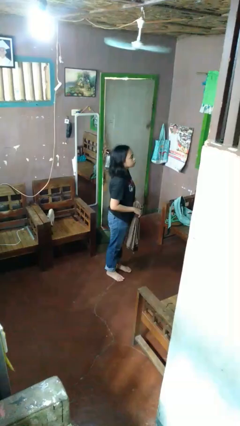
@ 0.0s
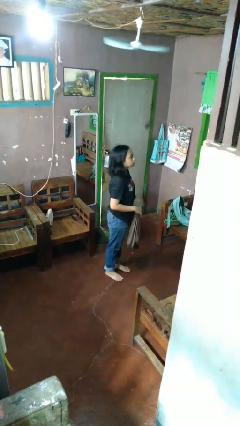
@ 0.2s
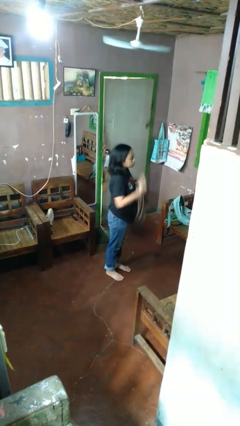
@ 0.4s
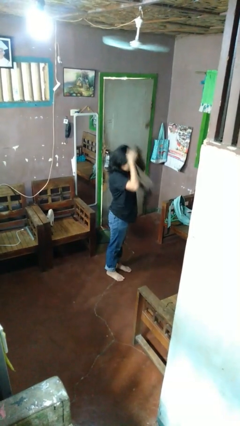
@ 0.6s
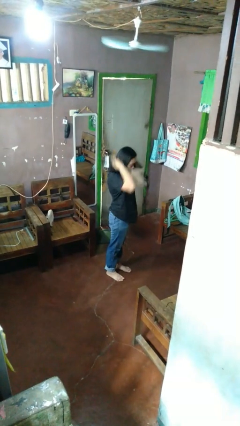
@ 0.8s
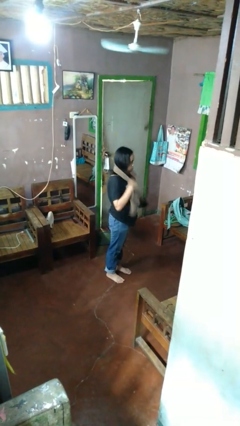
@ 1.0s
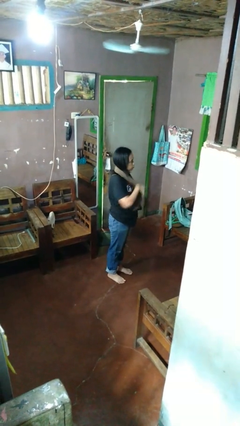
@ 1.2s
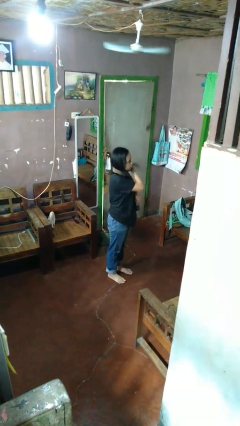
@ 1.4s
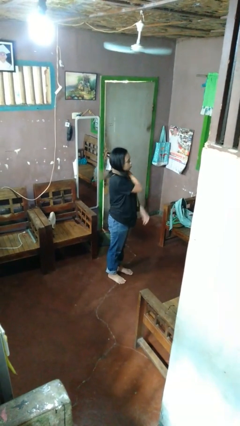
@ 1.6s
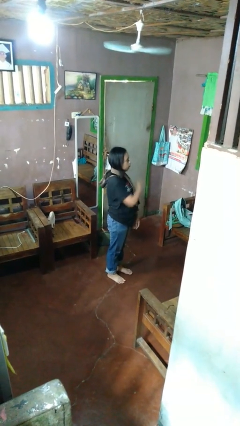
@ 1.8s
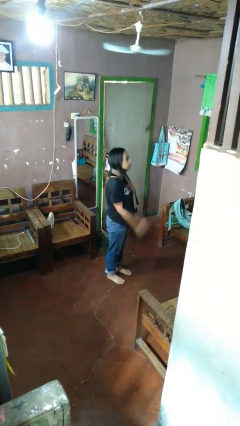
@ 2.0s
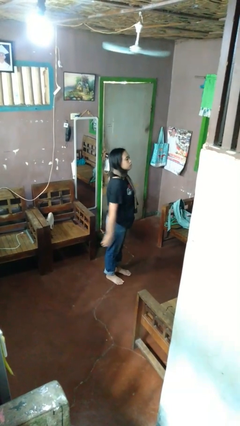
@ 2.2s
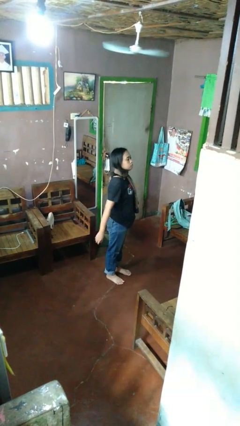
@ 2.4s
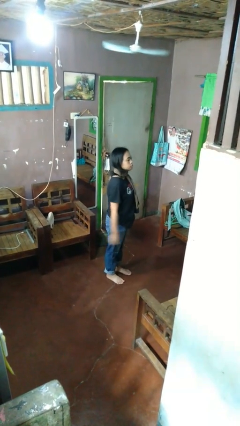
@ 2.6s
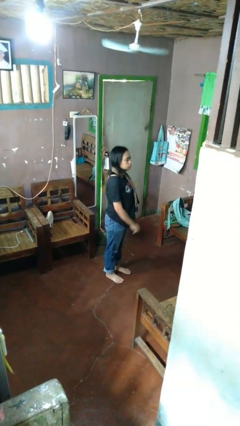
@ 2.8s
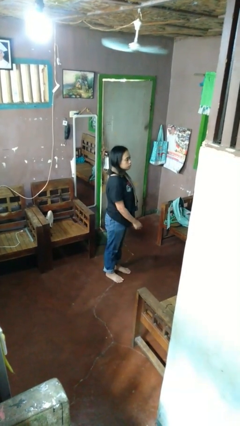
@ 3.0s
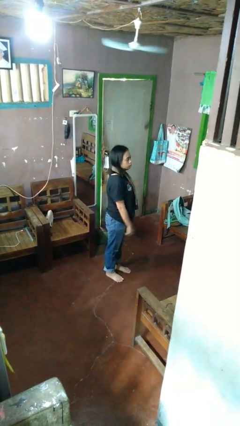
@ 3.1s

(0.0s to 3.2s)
person puts on scarf

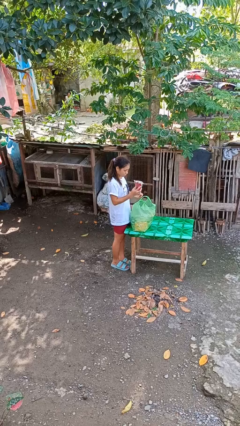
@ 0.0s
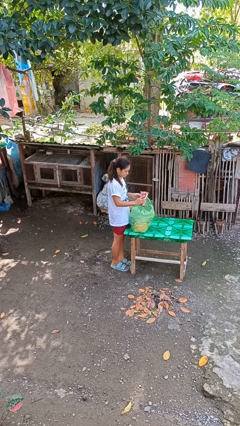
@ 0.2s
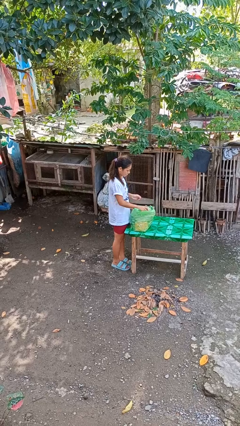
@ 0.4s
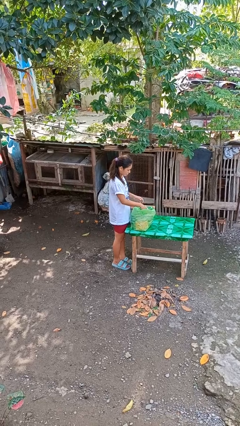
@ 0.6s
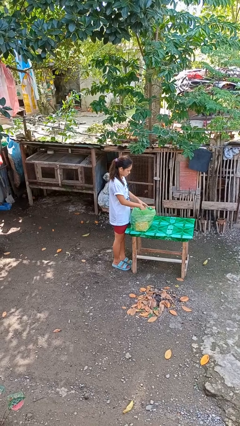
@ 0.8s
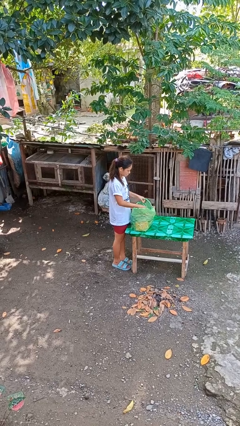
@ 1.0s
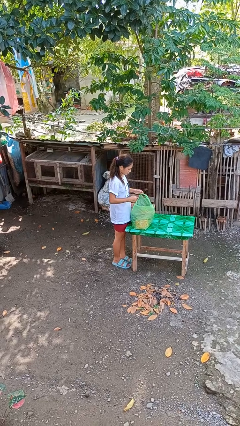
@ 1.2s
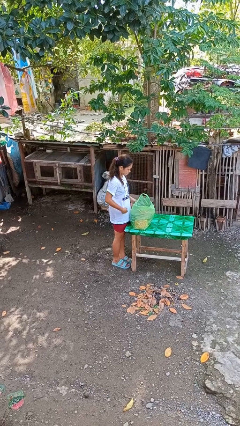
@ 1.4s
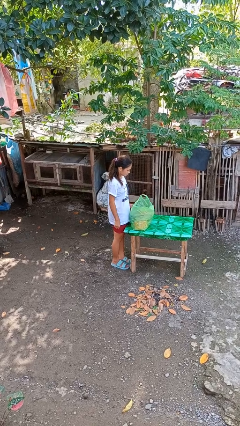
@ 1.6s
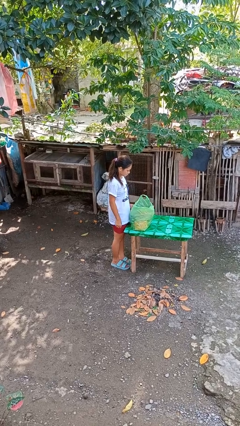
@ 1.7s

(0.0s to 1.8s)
person puts object into bag

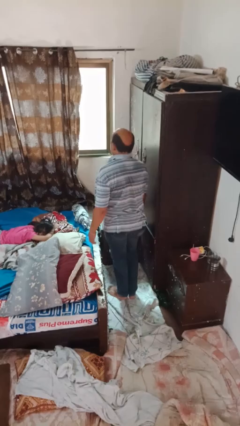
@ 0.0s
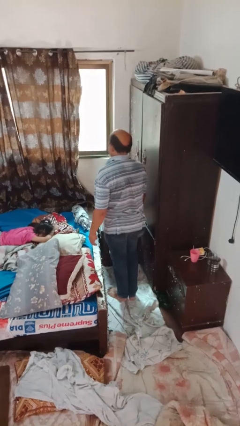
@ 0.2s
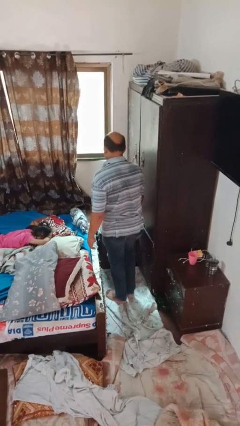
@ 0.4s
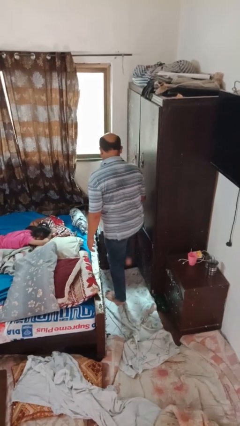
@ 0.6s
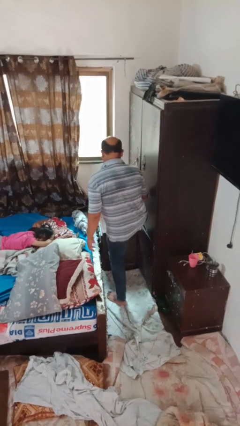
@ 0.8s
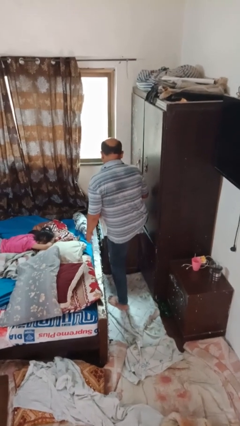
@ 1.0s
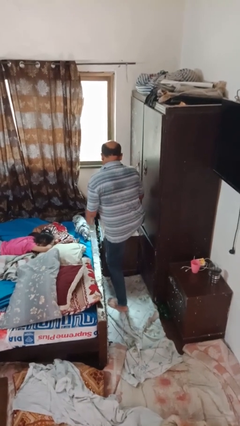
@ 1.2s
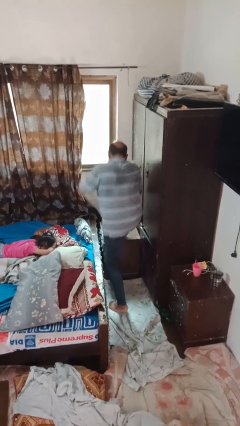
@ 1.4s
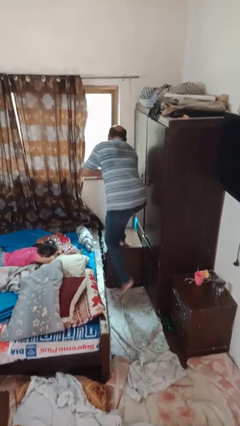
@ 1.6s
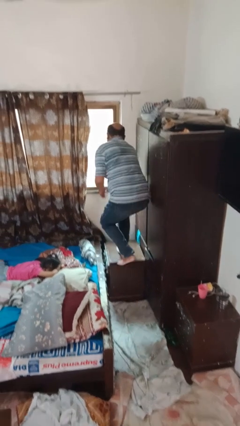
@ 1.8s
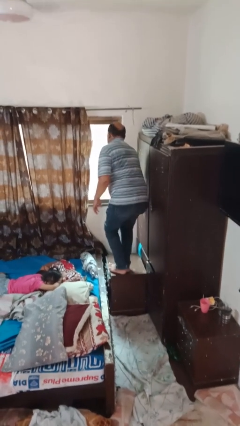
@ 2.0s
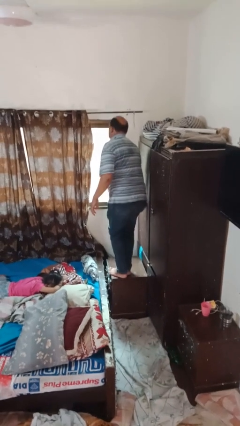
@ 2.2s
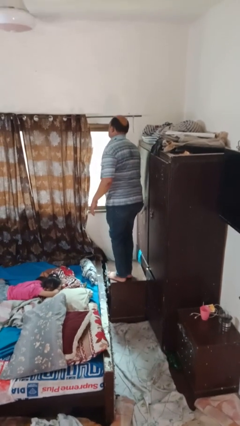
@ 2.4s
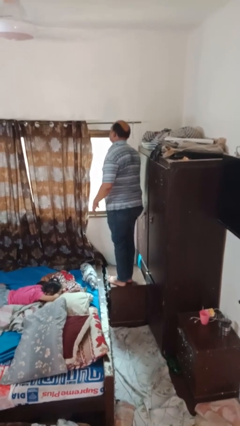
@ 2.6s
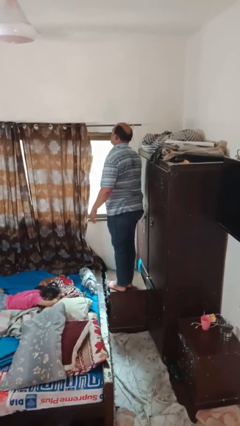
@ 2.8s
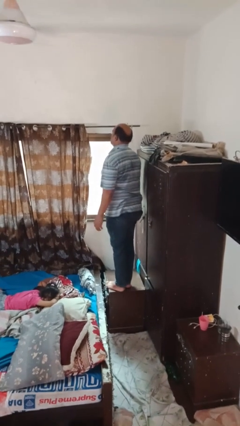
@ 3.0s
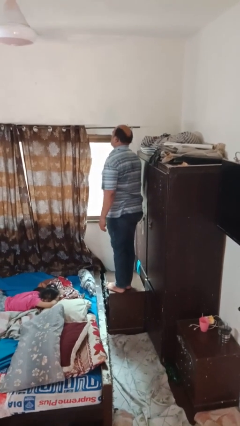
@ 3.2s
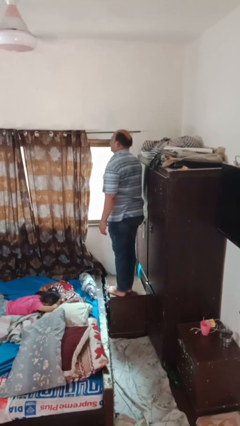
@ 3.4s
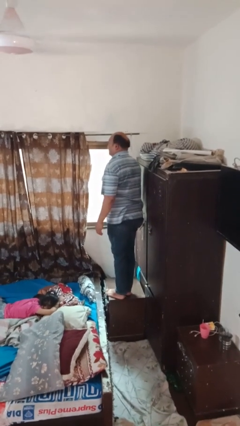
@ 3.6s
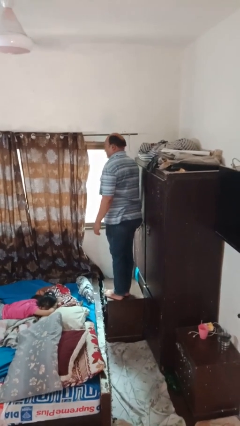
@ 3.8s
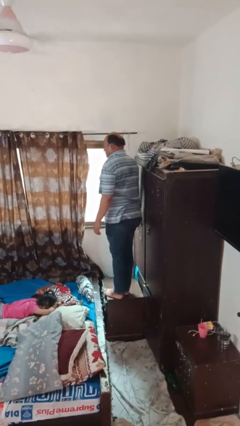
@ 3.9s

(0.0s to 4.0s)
person climbs on table

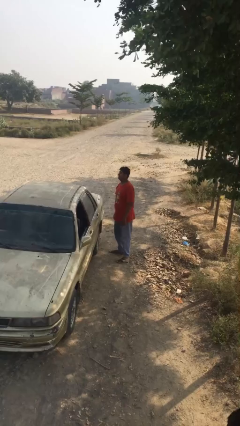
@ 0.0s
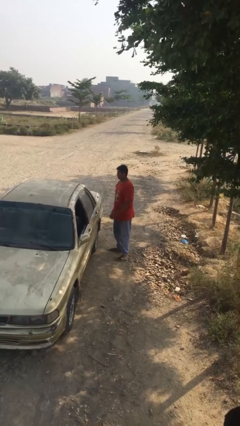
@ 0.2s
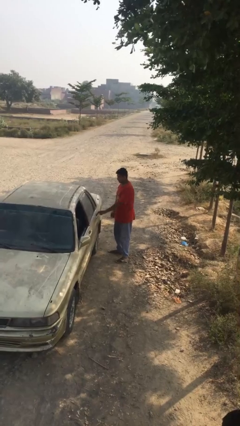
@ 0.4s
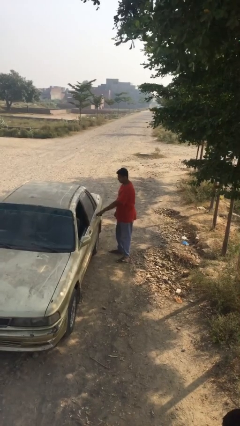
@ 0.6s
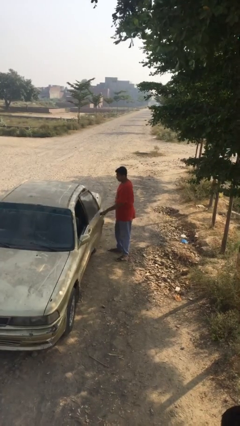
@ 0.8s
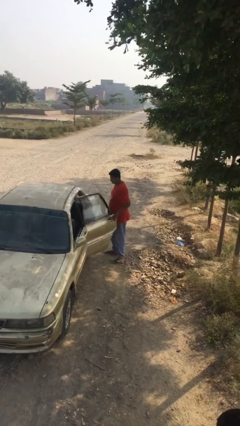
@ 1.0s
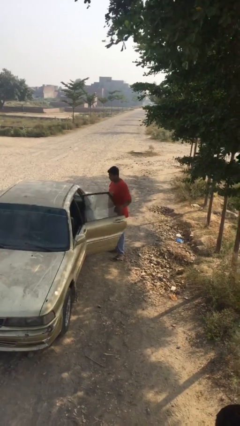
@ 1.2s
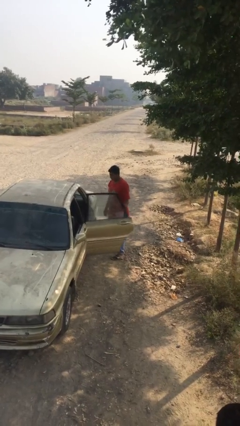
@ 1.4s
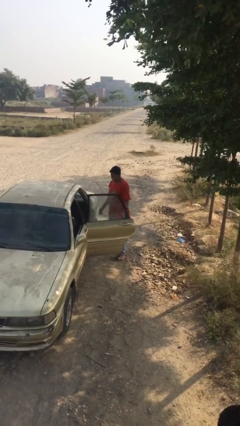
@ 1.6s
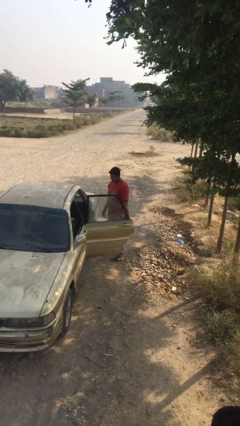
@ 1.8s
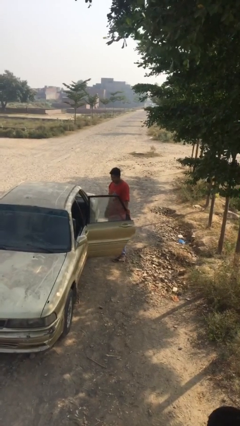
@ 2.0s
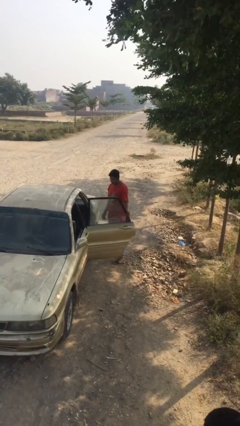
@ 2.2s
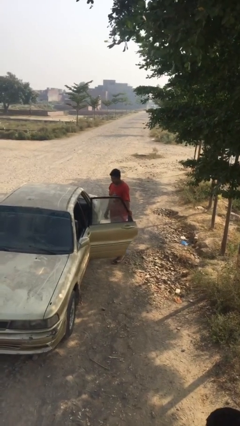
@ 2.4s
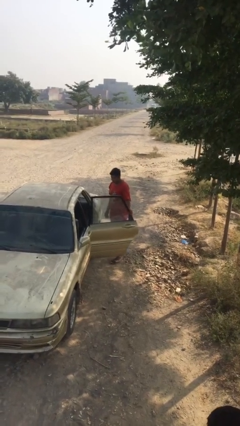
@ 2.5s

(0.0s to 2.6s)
person opens car door

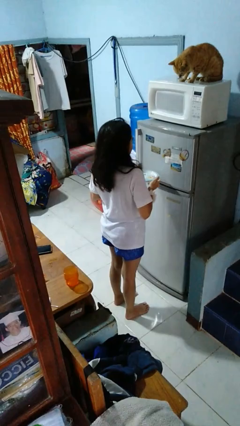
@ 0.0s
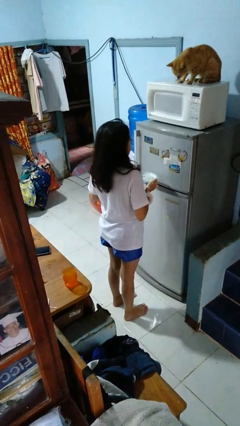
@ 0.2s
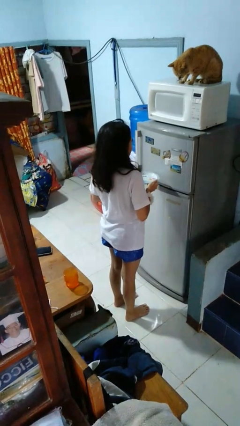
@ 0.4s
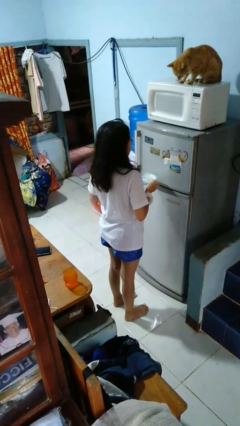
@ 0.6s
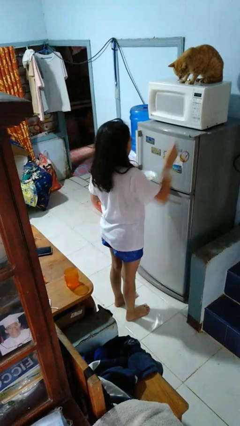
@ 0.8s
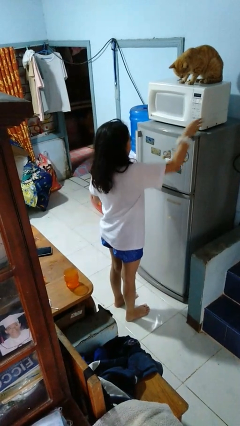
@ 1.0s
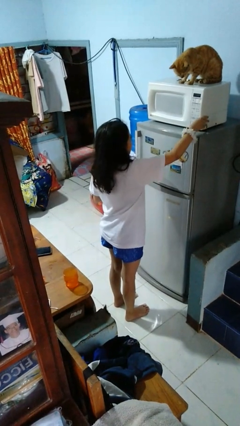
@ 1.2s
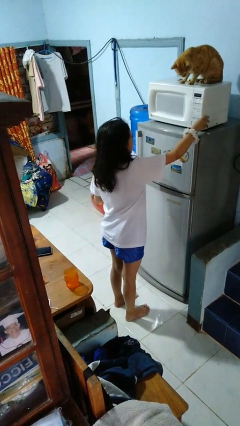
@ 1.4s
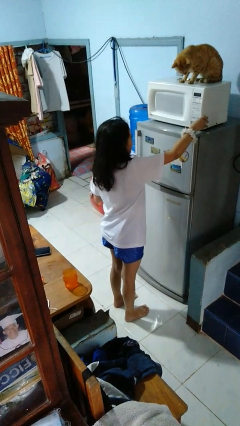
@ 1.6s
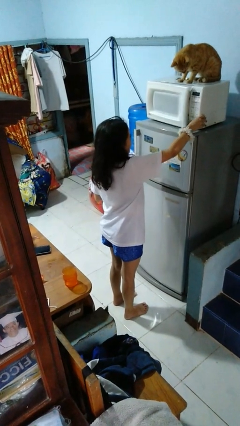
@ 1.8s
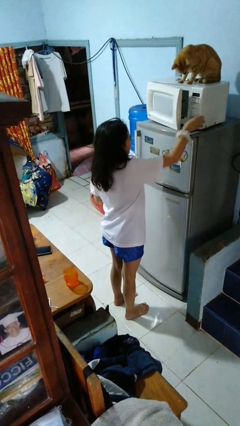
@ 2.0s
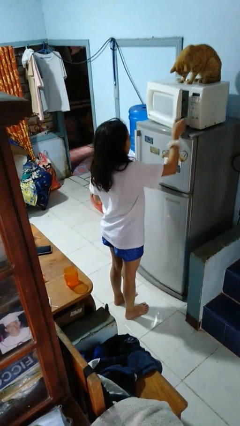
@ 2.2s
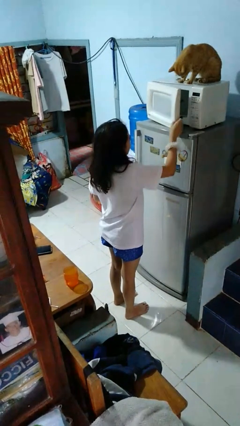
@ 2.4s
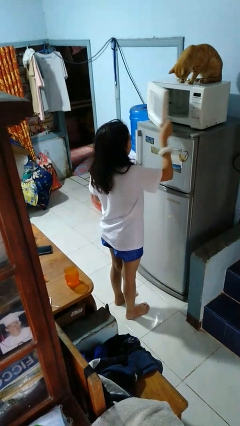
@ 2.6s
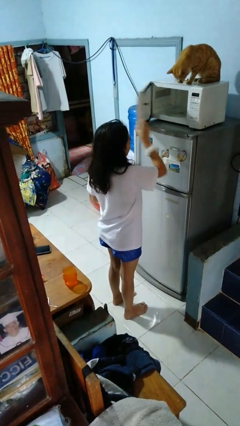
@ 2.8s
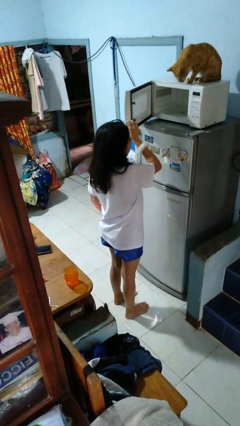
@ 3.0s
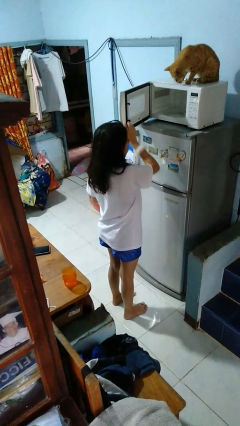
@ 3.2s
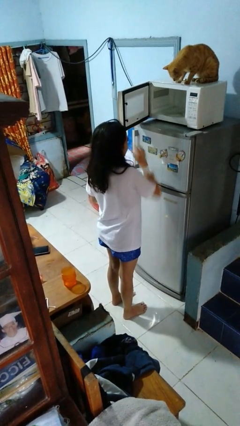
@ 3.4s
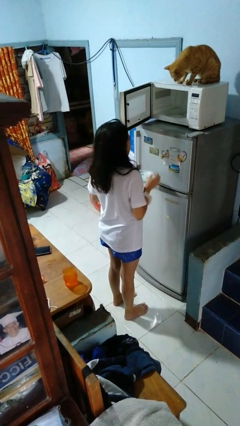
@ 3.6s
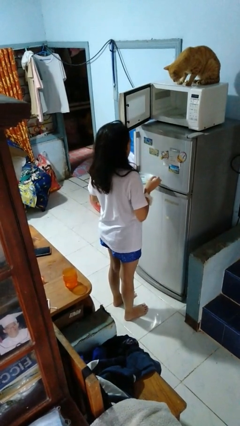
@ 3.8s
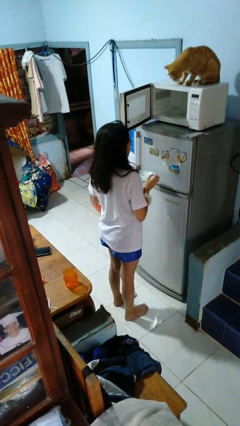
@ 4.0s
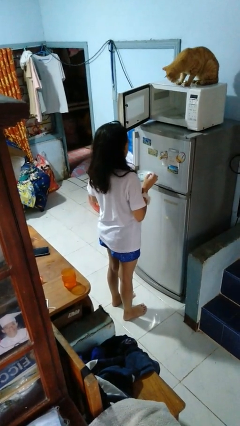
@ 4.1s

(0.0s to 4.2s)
person opens microwave

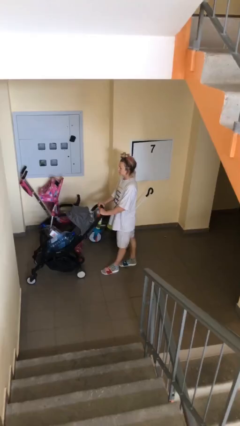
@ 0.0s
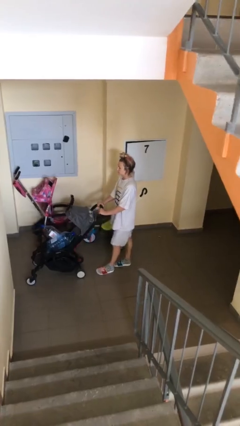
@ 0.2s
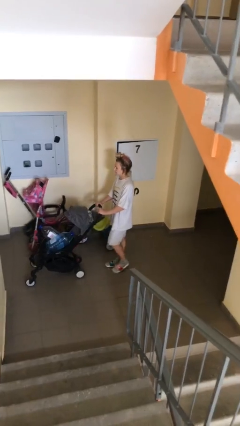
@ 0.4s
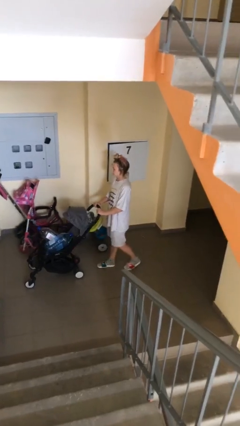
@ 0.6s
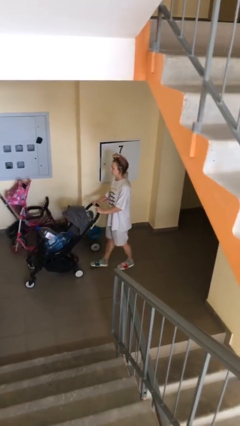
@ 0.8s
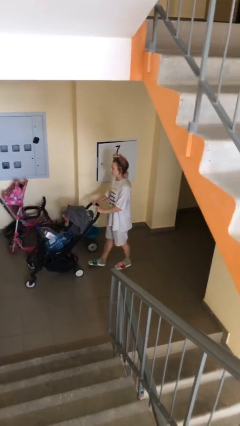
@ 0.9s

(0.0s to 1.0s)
person pulls wheeled cart

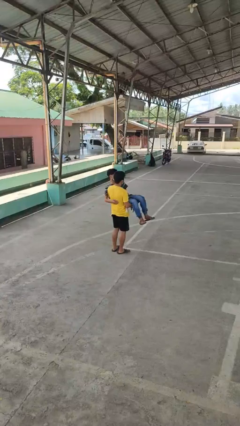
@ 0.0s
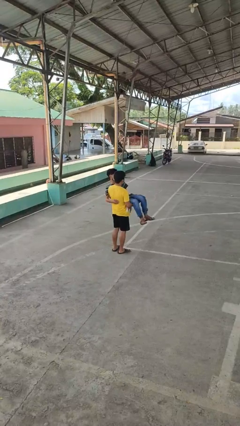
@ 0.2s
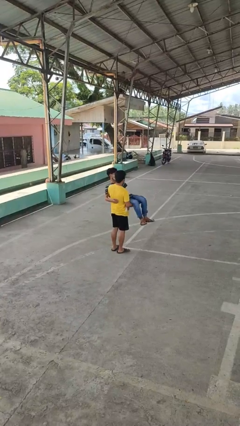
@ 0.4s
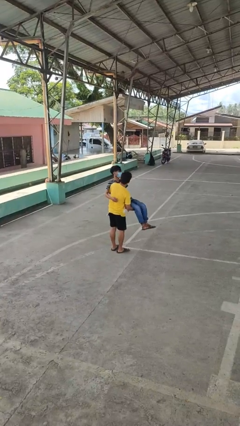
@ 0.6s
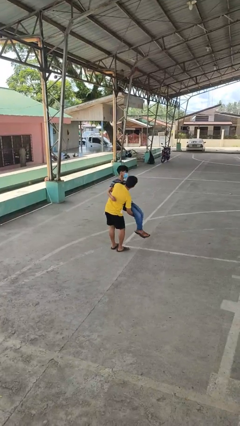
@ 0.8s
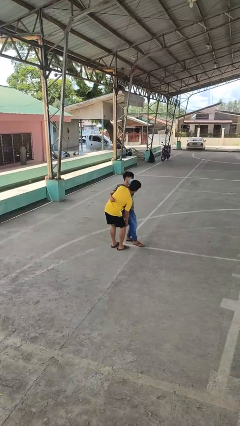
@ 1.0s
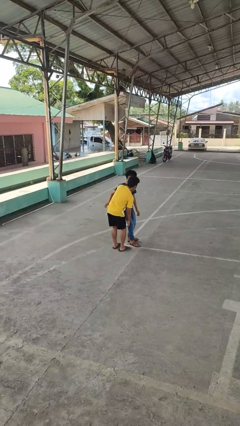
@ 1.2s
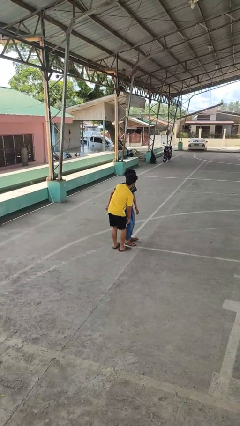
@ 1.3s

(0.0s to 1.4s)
person puts down person
